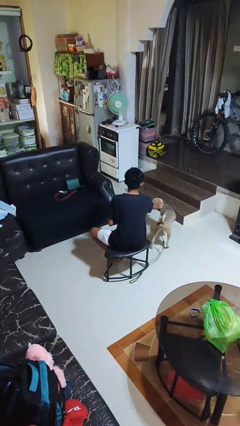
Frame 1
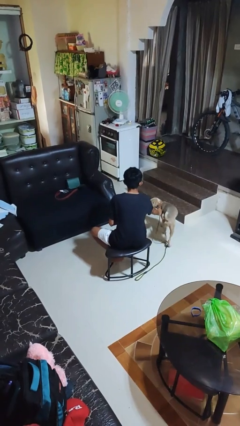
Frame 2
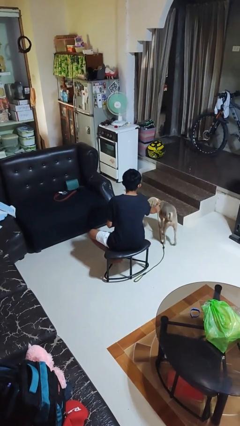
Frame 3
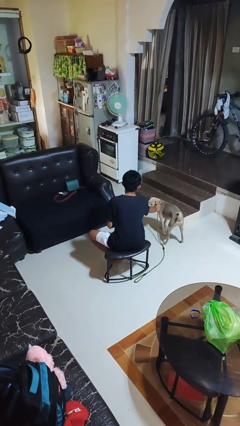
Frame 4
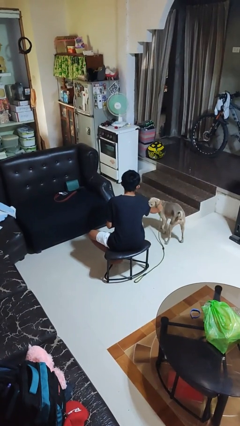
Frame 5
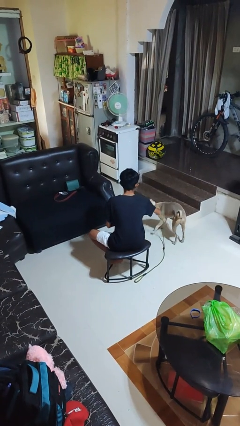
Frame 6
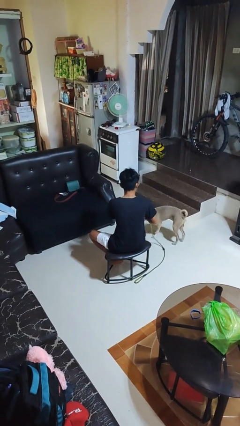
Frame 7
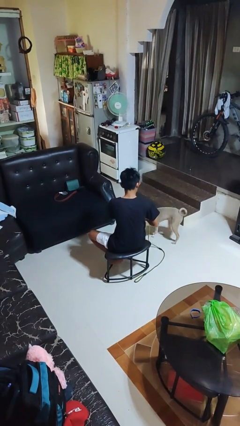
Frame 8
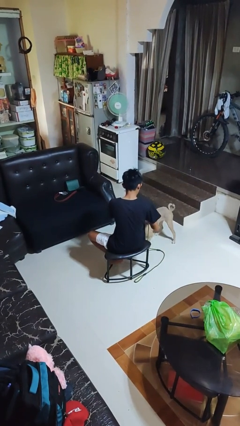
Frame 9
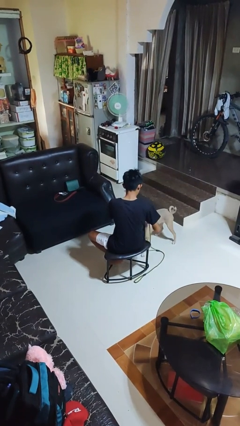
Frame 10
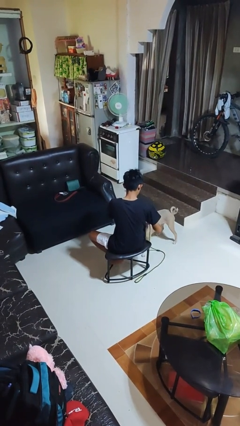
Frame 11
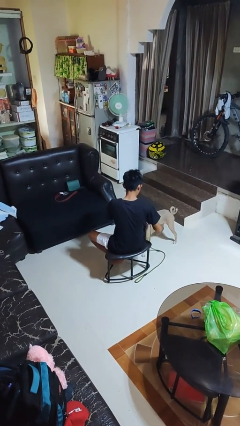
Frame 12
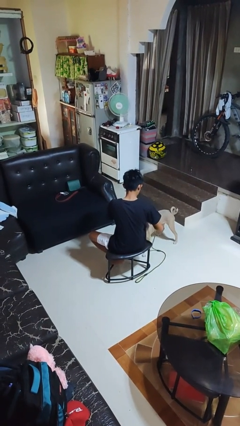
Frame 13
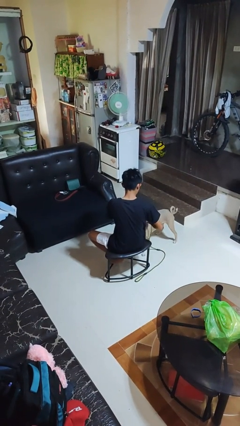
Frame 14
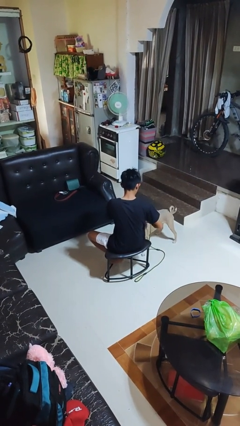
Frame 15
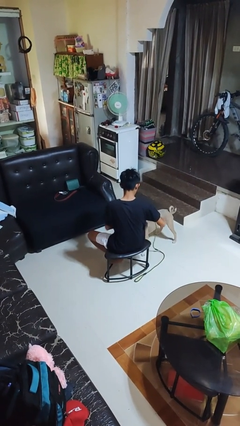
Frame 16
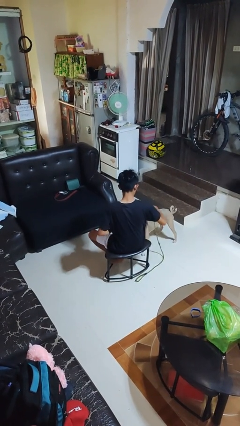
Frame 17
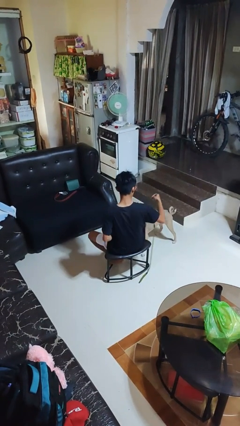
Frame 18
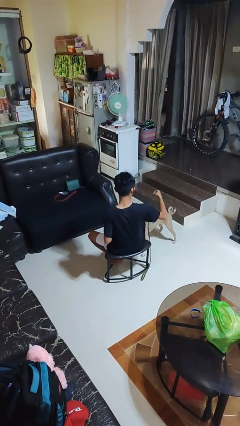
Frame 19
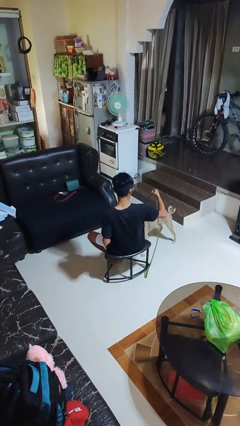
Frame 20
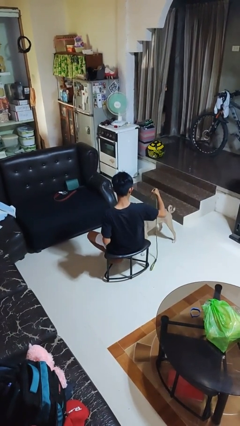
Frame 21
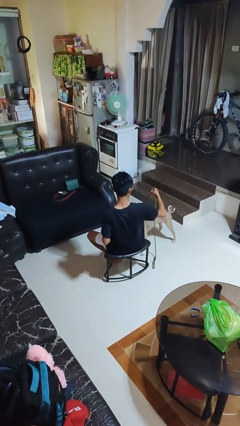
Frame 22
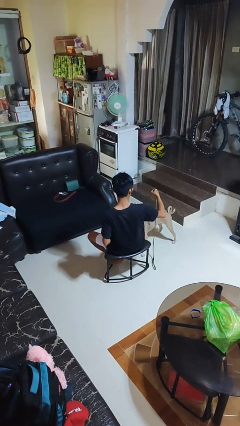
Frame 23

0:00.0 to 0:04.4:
person attaches leash to dog

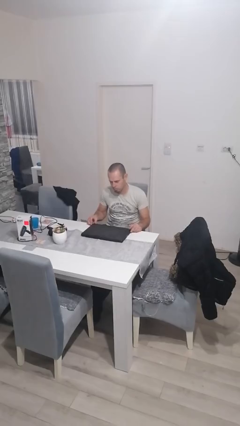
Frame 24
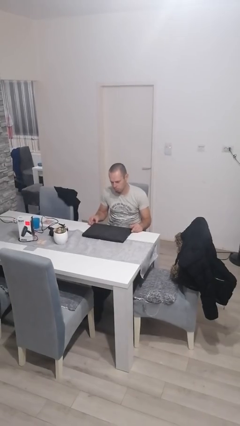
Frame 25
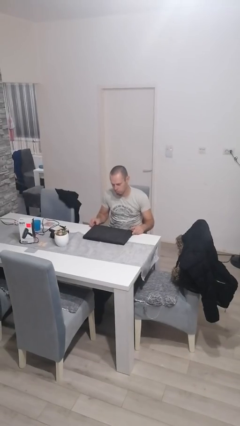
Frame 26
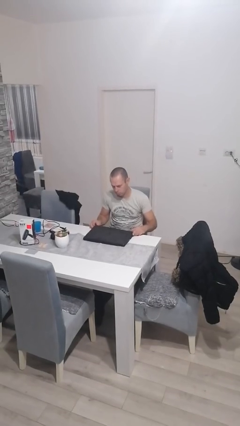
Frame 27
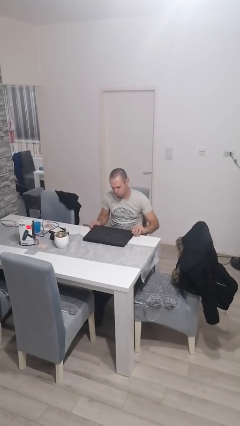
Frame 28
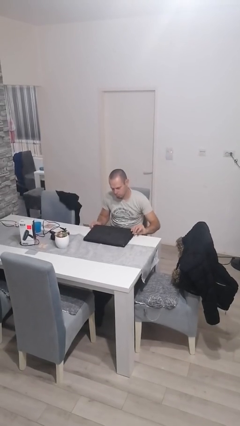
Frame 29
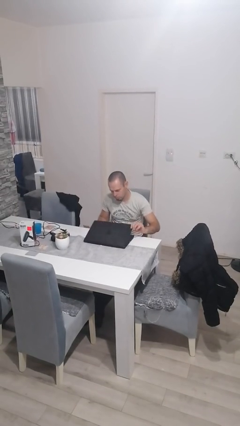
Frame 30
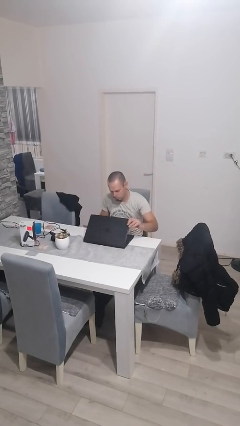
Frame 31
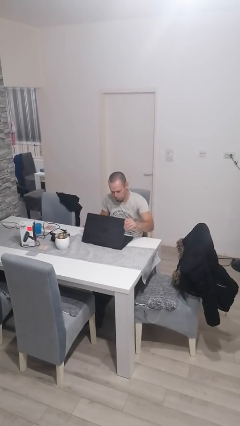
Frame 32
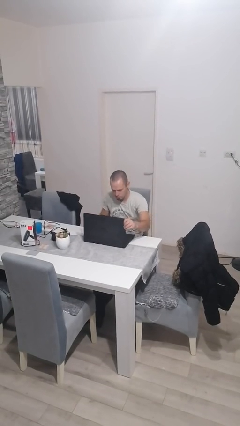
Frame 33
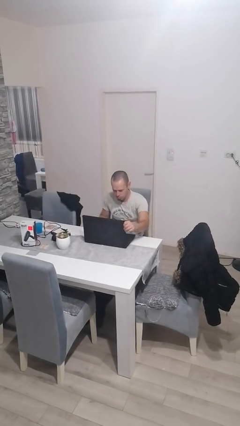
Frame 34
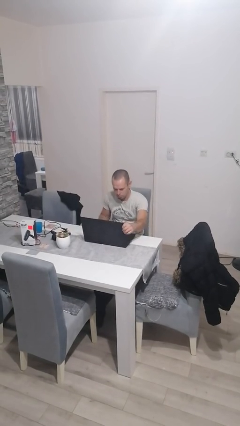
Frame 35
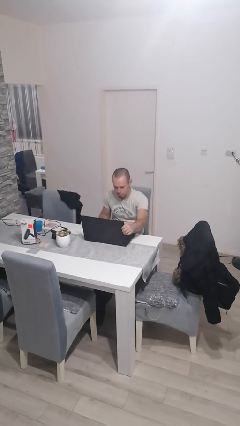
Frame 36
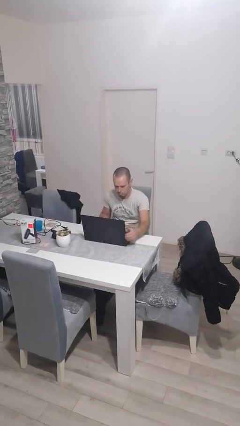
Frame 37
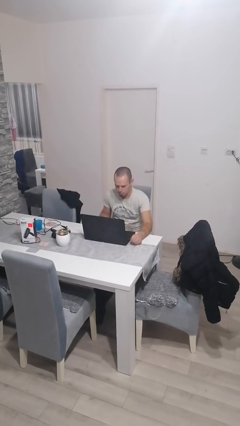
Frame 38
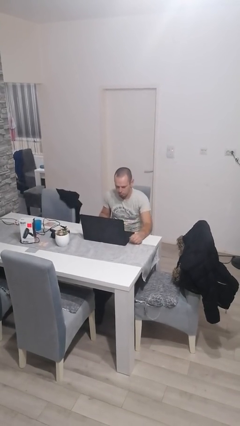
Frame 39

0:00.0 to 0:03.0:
person opens laptop

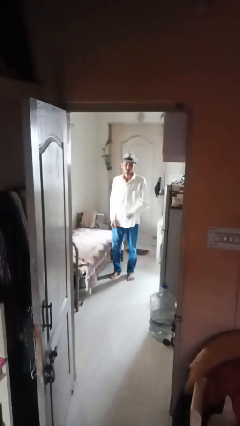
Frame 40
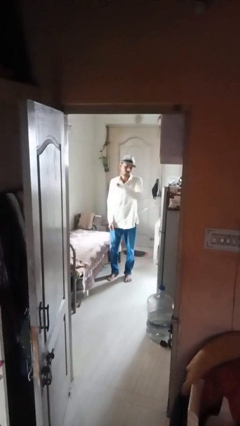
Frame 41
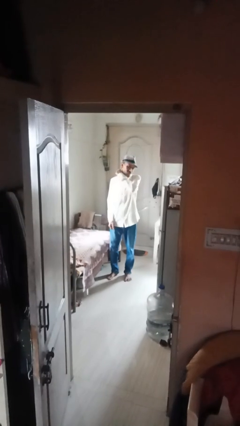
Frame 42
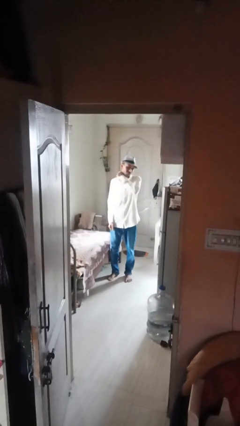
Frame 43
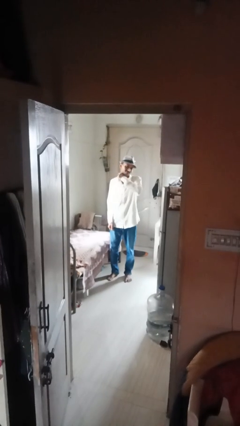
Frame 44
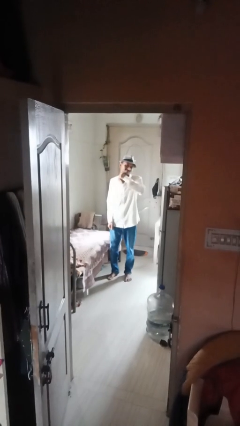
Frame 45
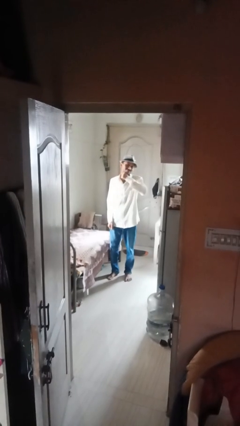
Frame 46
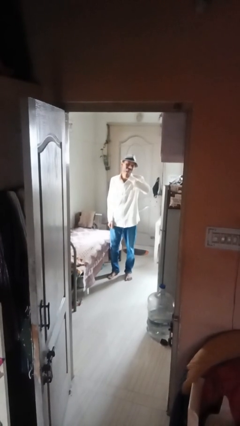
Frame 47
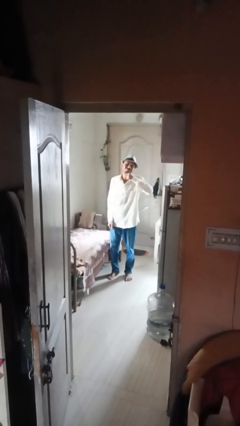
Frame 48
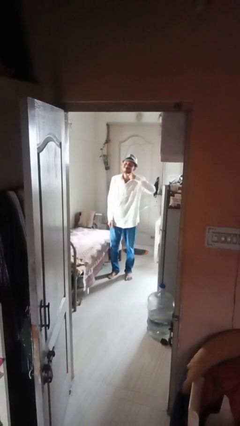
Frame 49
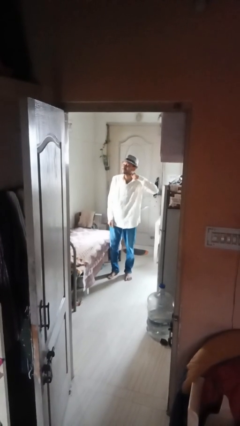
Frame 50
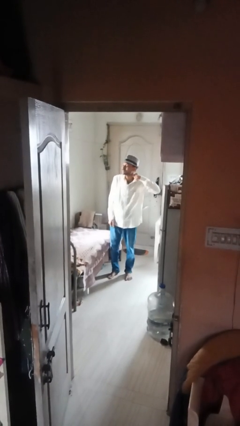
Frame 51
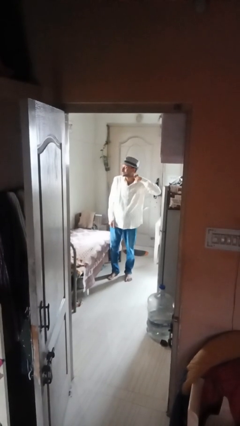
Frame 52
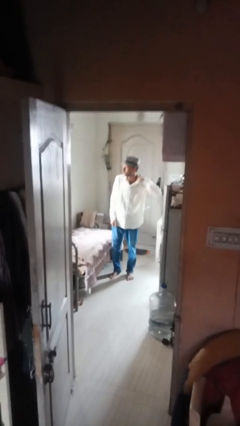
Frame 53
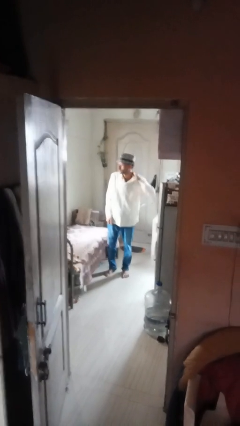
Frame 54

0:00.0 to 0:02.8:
person gestures cut

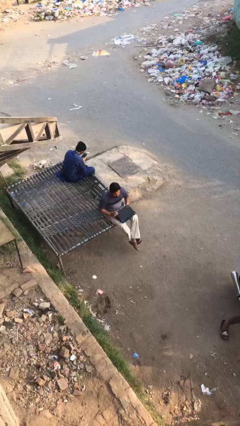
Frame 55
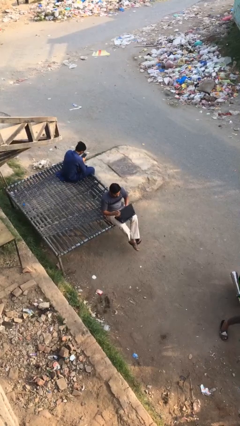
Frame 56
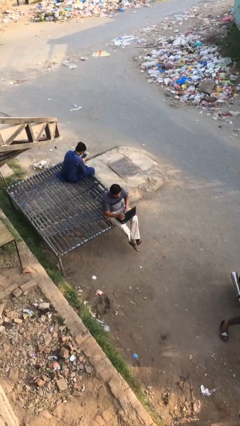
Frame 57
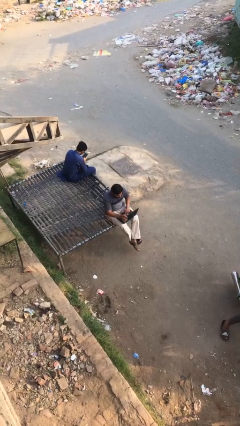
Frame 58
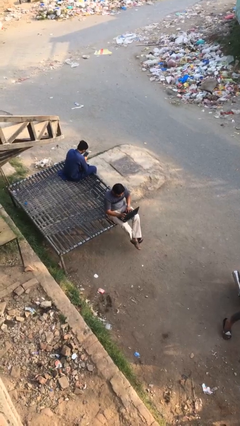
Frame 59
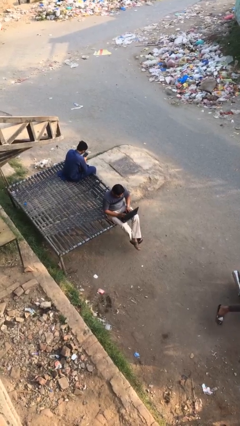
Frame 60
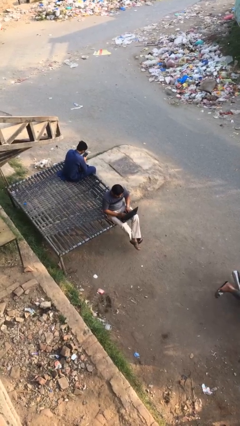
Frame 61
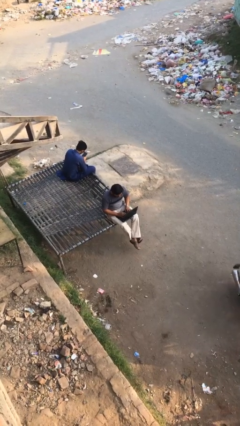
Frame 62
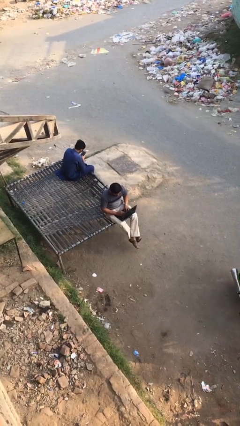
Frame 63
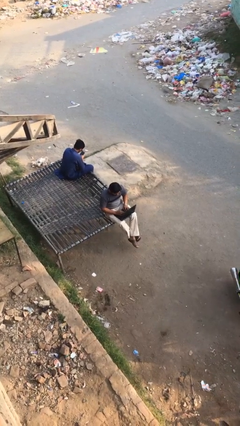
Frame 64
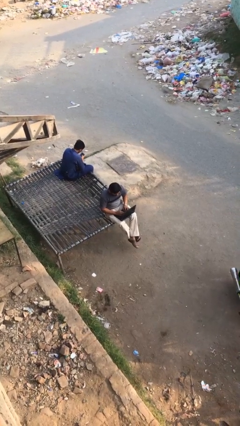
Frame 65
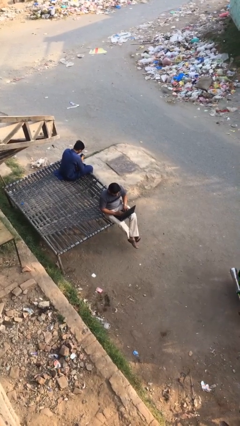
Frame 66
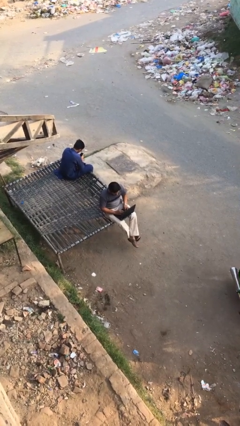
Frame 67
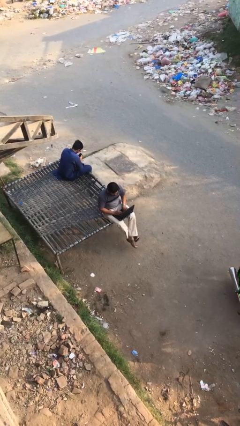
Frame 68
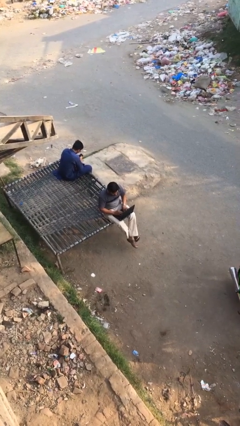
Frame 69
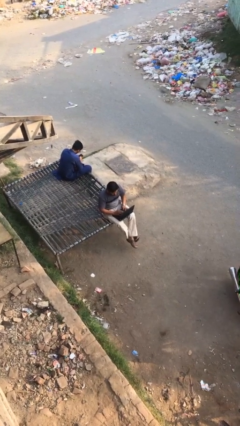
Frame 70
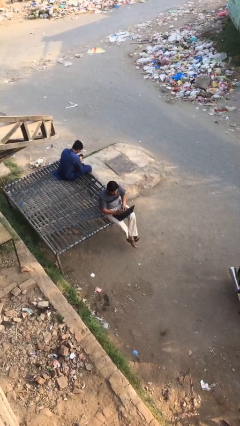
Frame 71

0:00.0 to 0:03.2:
person interacts with laptop

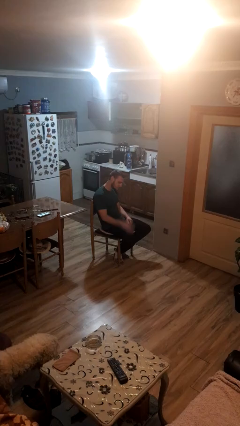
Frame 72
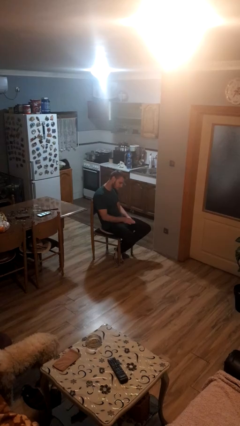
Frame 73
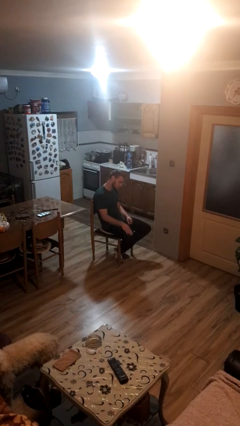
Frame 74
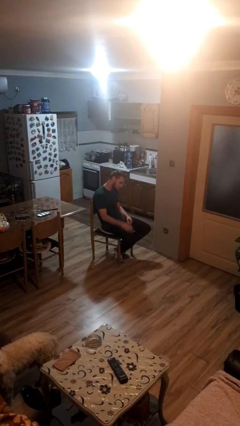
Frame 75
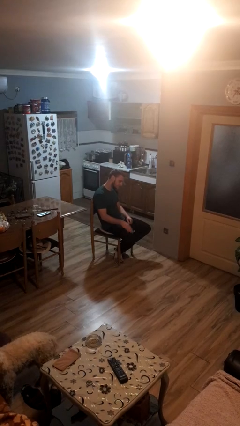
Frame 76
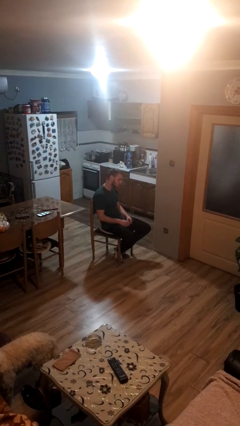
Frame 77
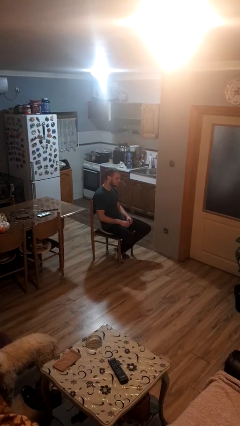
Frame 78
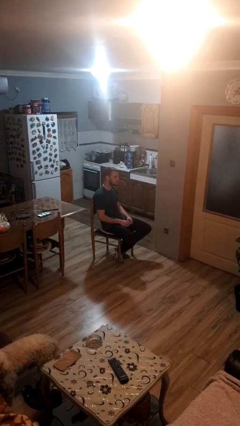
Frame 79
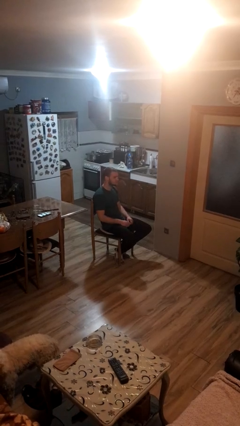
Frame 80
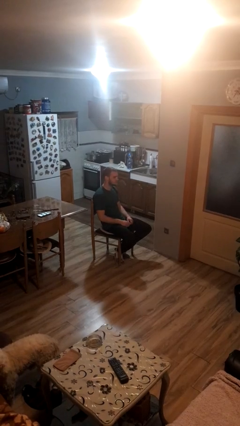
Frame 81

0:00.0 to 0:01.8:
person slaps hands on thighs

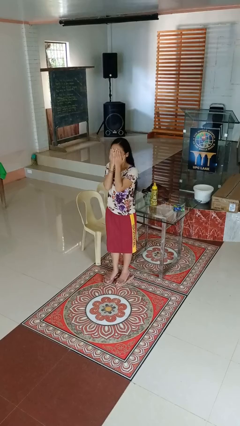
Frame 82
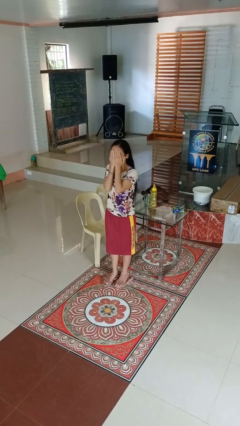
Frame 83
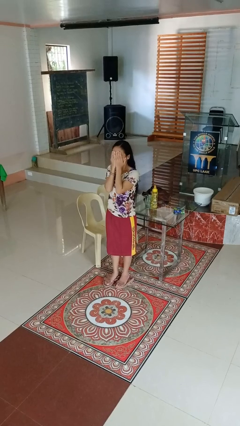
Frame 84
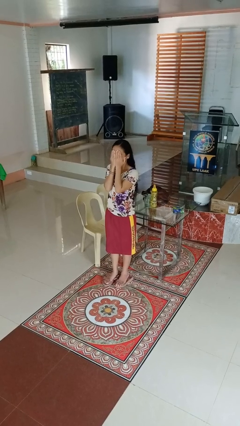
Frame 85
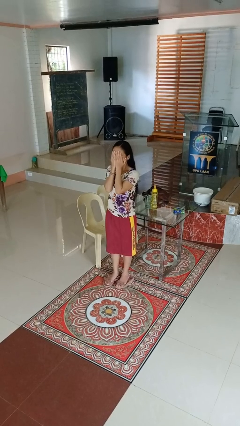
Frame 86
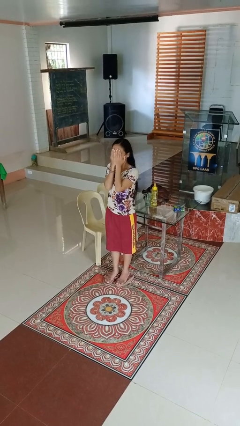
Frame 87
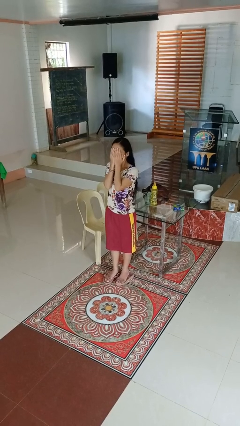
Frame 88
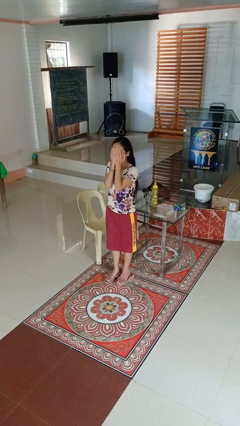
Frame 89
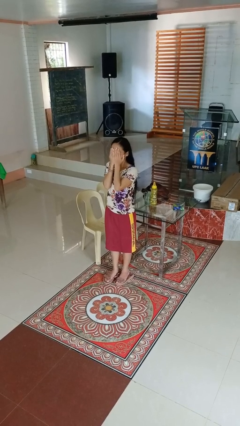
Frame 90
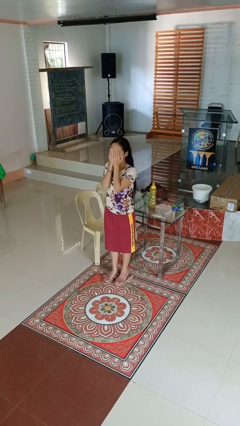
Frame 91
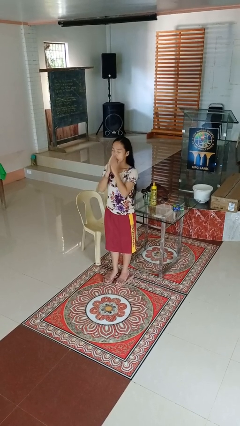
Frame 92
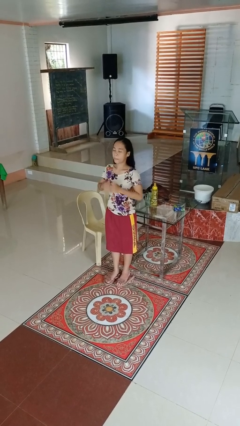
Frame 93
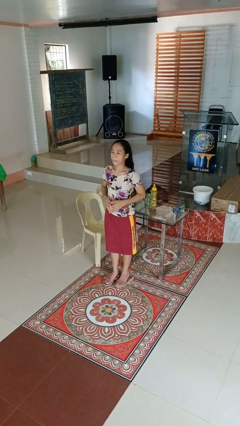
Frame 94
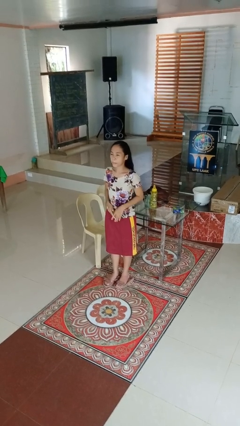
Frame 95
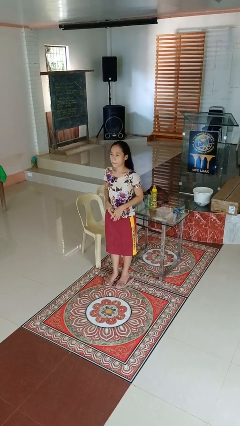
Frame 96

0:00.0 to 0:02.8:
person covers face with hands
